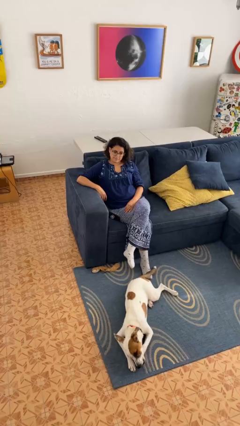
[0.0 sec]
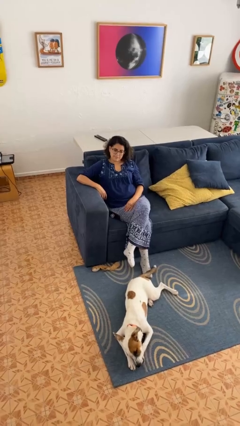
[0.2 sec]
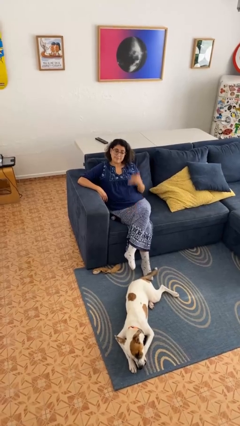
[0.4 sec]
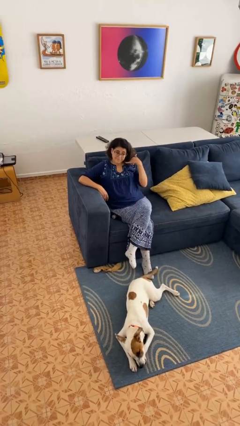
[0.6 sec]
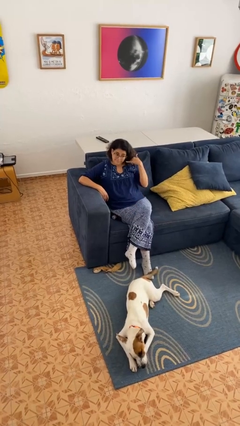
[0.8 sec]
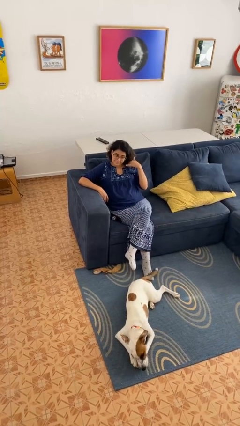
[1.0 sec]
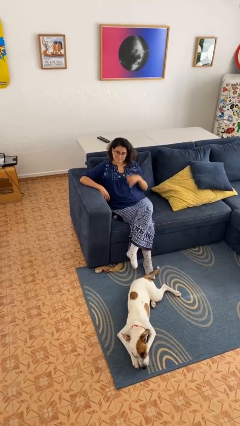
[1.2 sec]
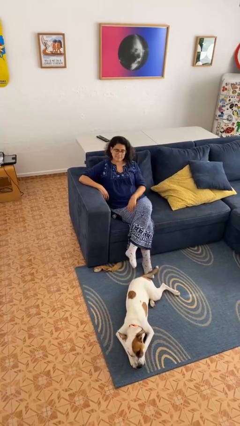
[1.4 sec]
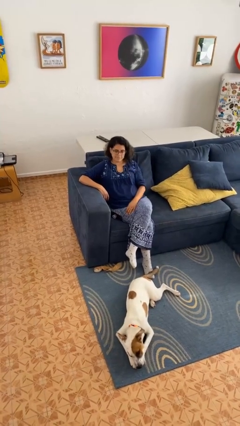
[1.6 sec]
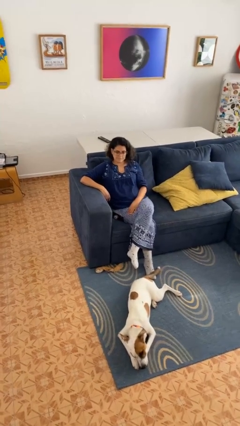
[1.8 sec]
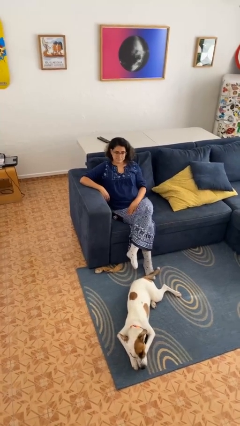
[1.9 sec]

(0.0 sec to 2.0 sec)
person gestures call me

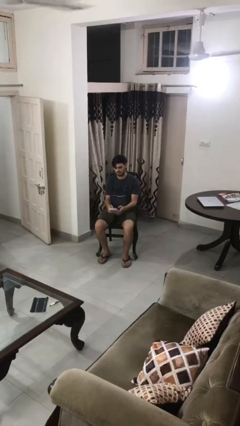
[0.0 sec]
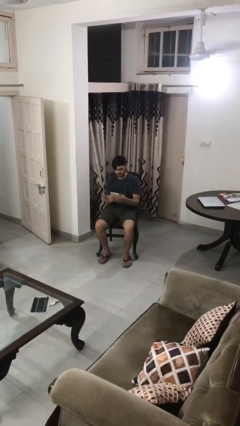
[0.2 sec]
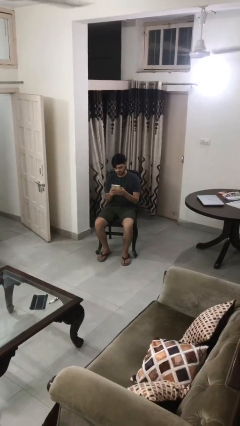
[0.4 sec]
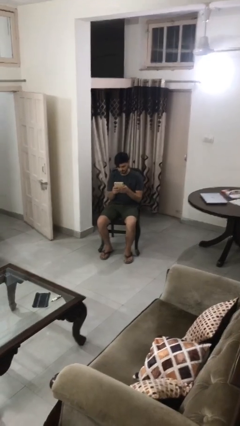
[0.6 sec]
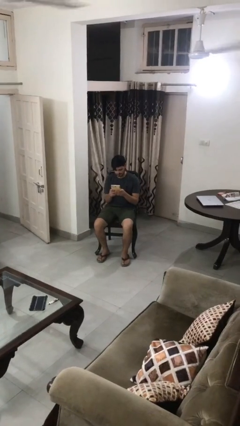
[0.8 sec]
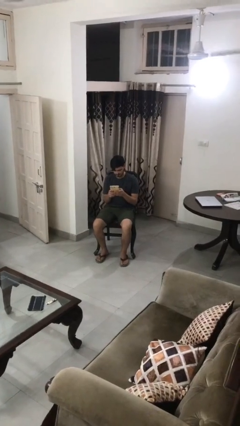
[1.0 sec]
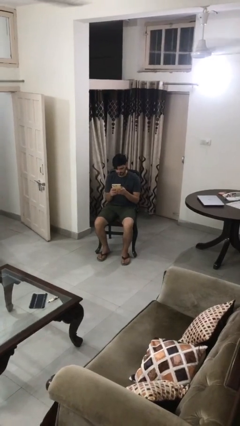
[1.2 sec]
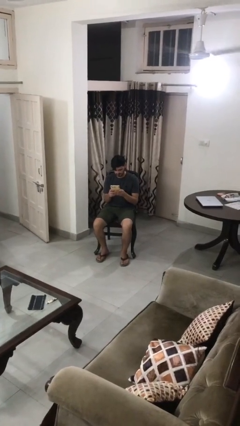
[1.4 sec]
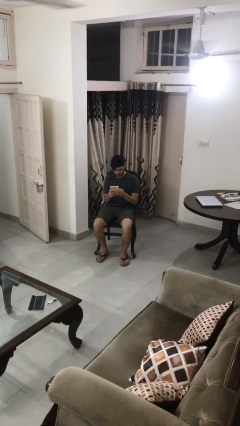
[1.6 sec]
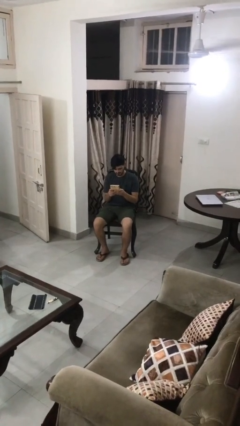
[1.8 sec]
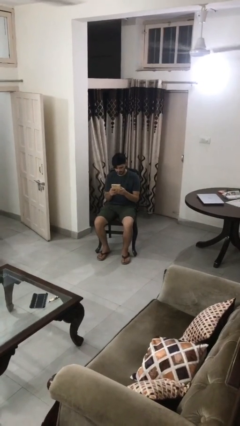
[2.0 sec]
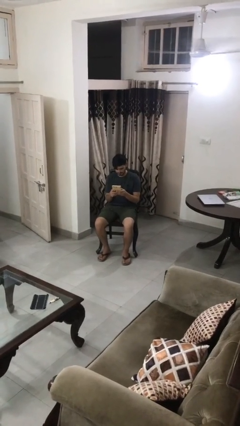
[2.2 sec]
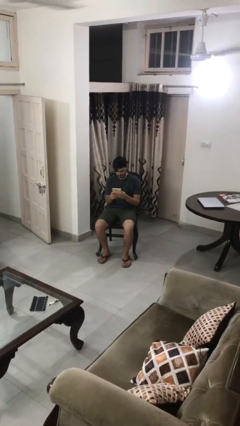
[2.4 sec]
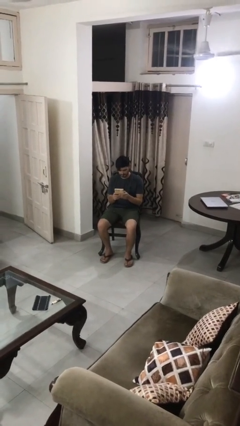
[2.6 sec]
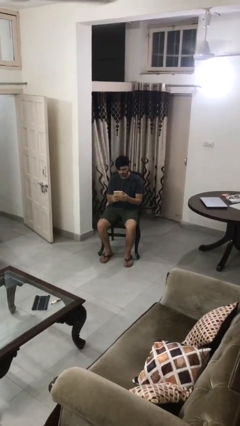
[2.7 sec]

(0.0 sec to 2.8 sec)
person interacts with tablet

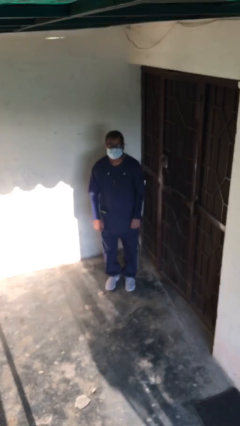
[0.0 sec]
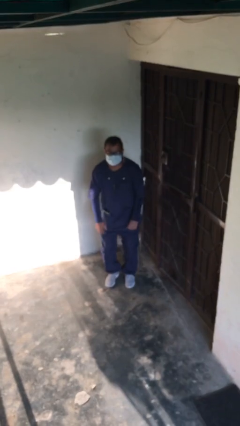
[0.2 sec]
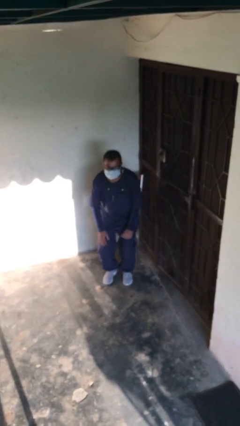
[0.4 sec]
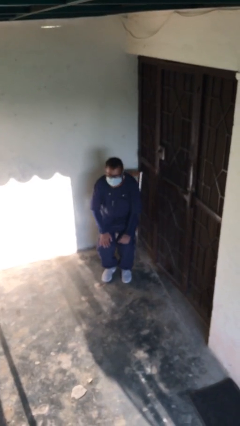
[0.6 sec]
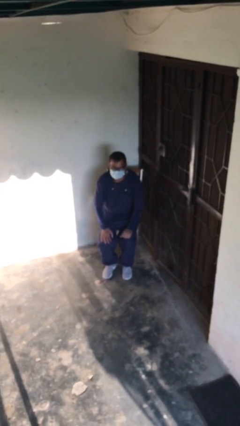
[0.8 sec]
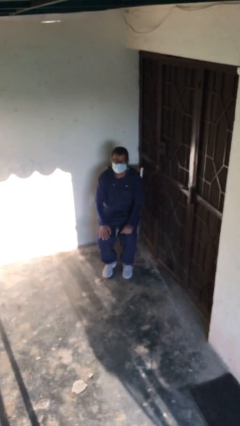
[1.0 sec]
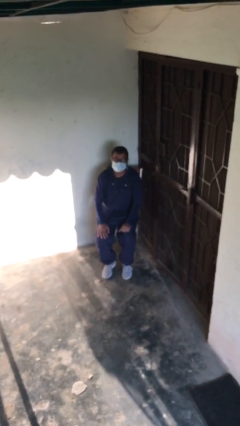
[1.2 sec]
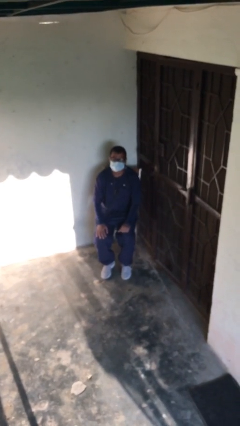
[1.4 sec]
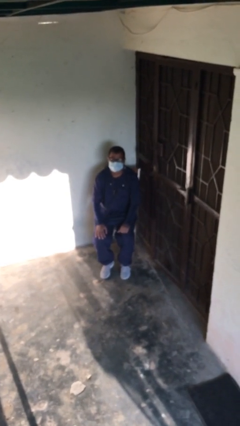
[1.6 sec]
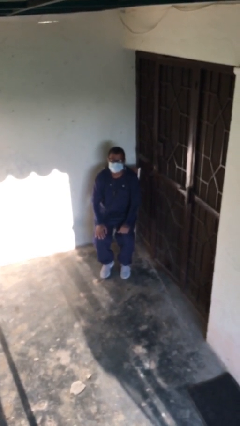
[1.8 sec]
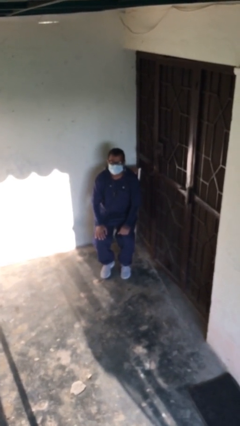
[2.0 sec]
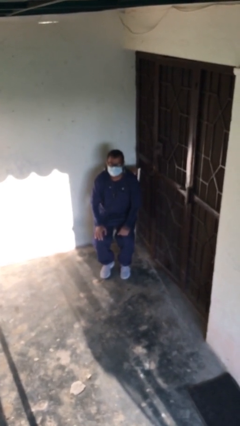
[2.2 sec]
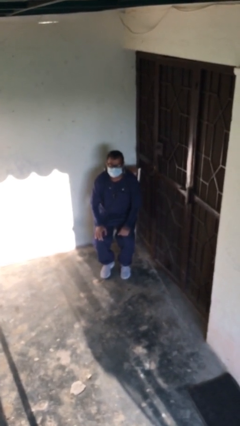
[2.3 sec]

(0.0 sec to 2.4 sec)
person sits down

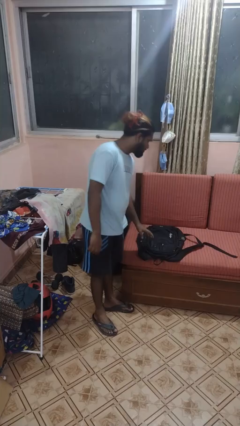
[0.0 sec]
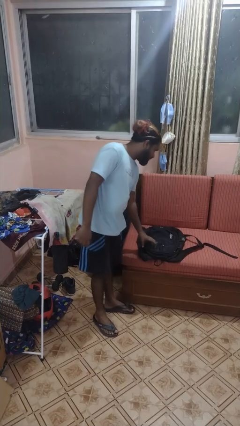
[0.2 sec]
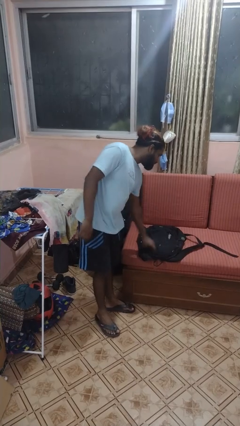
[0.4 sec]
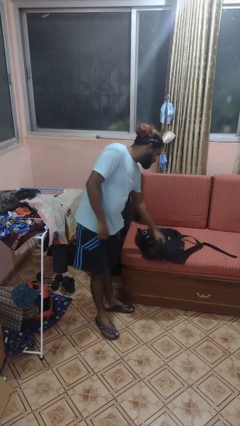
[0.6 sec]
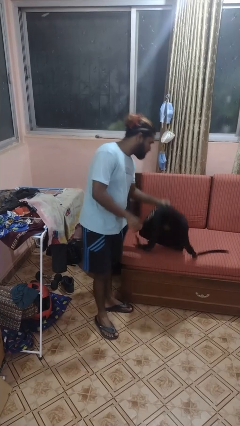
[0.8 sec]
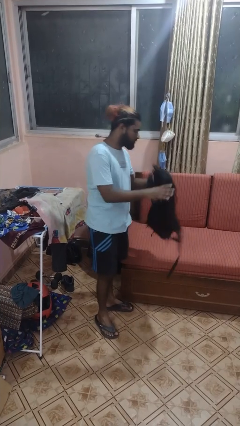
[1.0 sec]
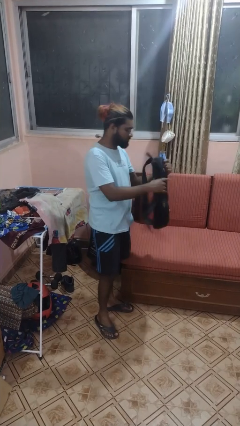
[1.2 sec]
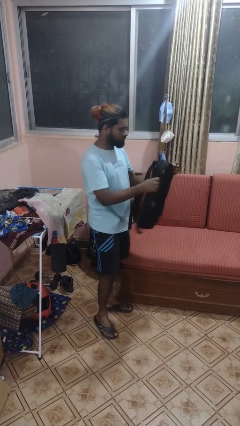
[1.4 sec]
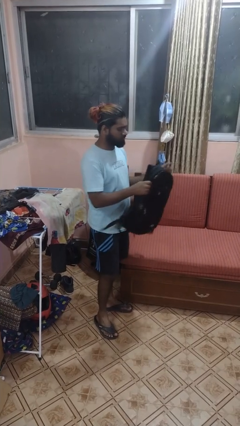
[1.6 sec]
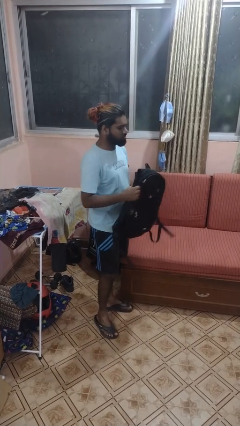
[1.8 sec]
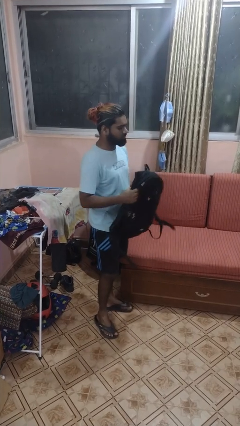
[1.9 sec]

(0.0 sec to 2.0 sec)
person picks up object from couch

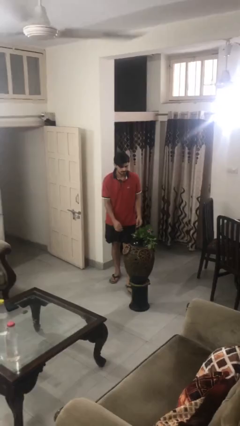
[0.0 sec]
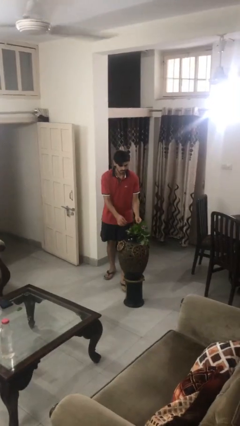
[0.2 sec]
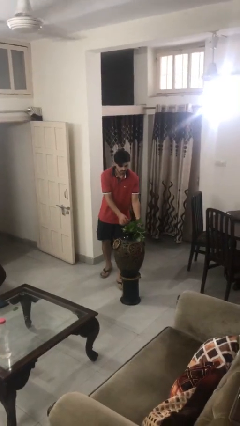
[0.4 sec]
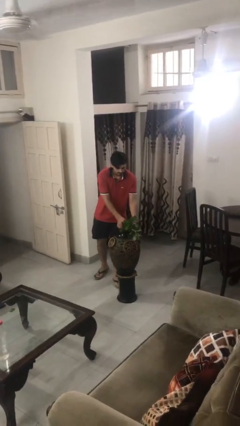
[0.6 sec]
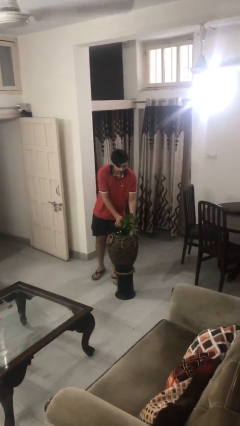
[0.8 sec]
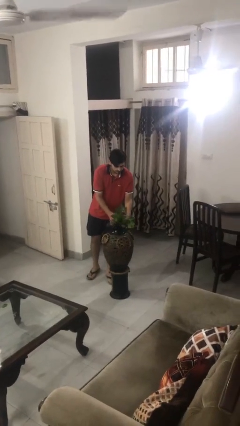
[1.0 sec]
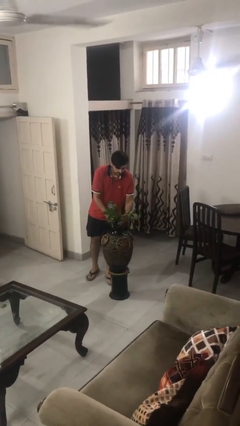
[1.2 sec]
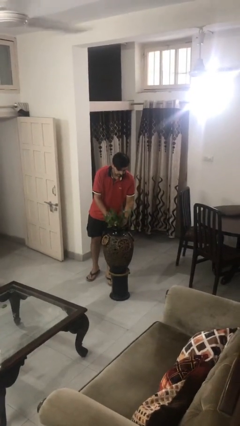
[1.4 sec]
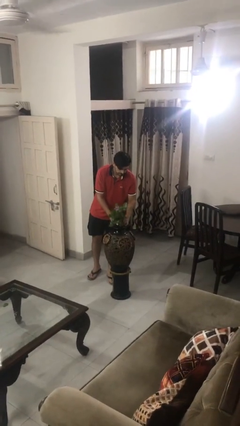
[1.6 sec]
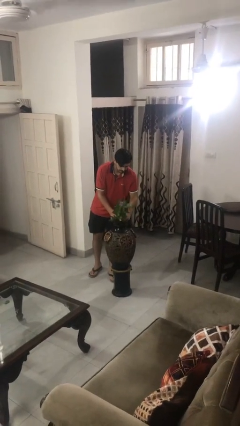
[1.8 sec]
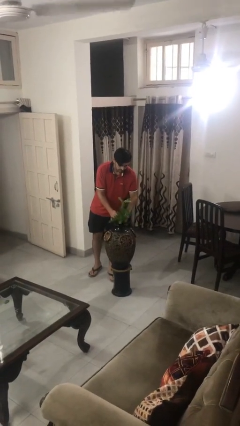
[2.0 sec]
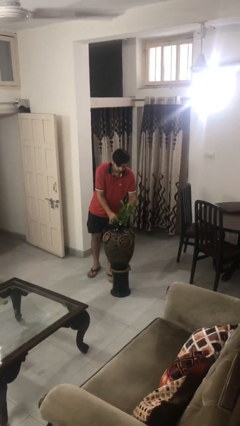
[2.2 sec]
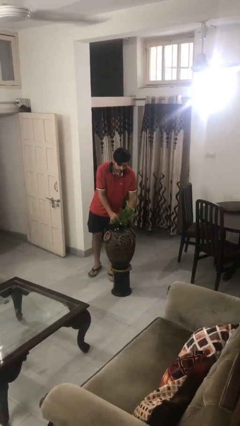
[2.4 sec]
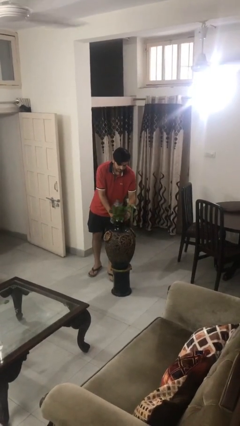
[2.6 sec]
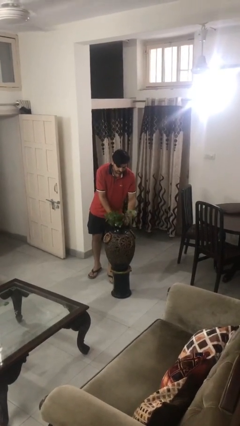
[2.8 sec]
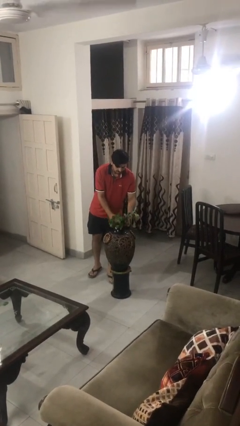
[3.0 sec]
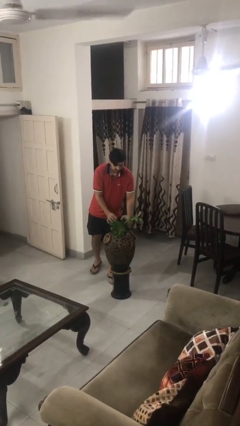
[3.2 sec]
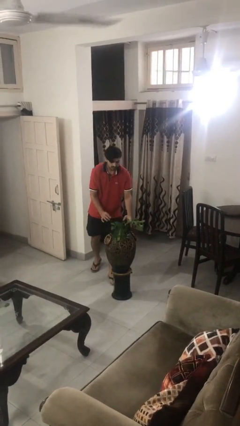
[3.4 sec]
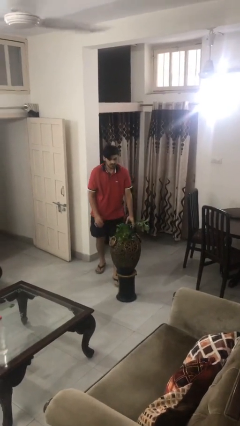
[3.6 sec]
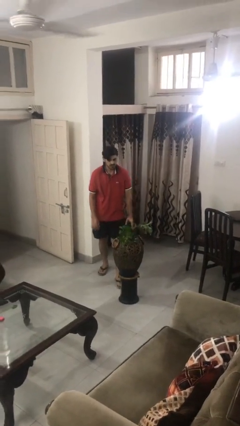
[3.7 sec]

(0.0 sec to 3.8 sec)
person arranges flowers in vase

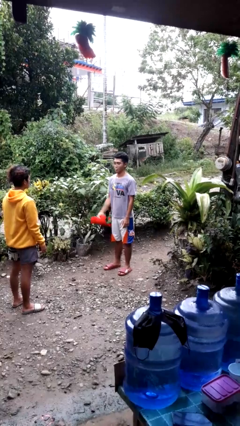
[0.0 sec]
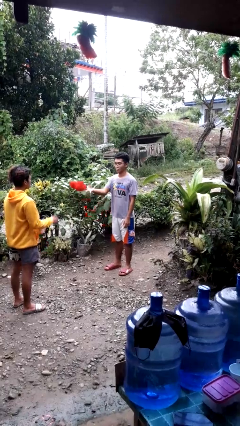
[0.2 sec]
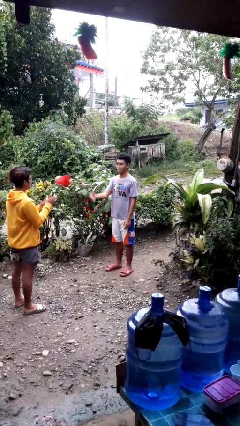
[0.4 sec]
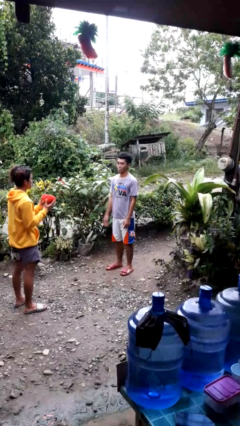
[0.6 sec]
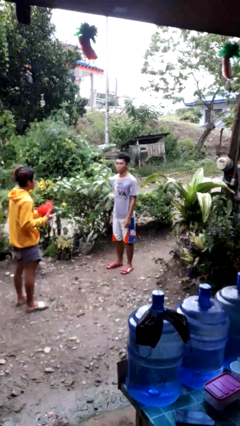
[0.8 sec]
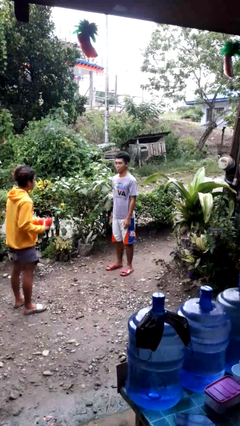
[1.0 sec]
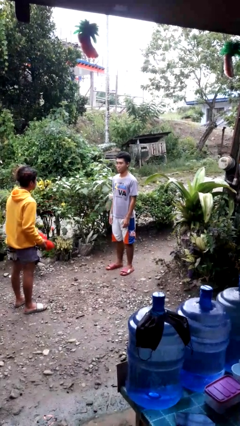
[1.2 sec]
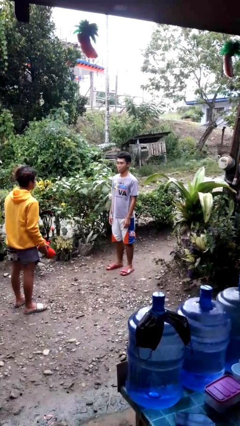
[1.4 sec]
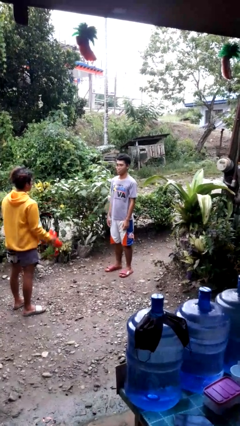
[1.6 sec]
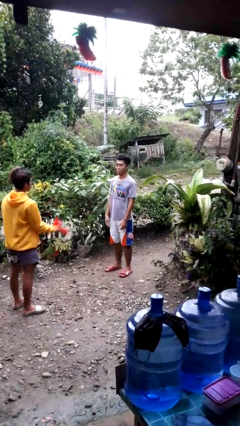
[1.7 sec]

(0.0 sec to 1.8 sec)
person throws object to person

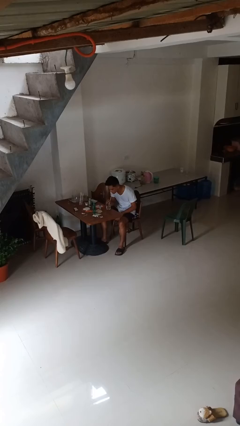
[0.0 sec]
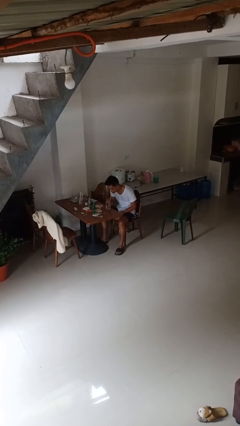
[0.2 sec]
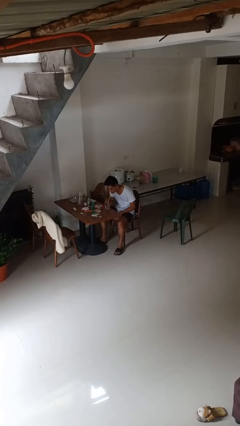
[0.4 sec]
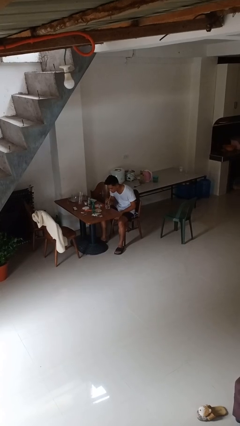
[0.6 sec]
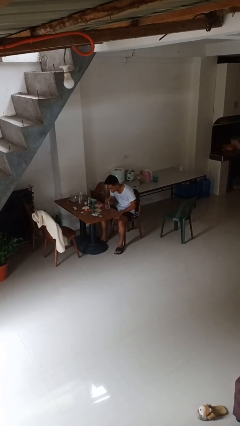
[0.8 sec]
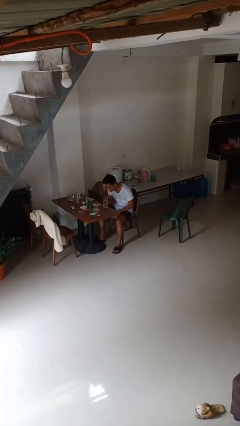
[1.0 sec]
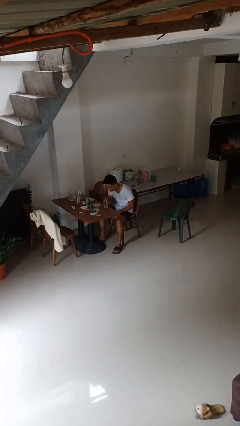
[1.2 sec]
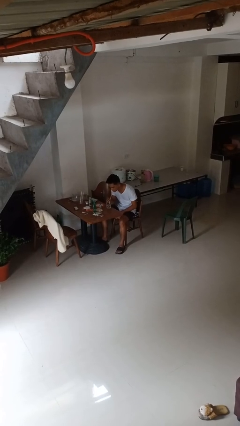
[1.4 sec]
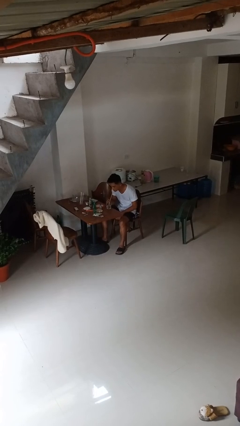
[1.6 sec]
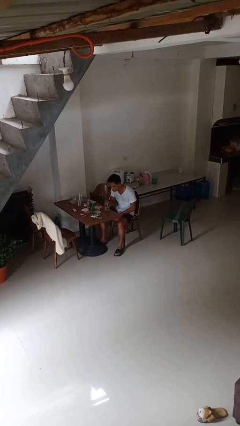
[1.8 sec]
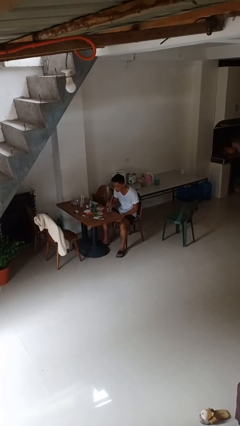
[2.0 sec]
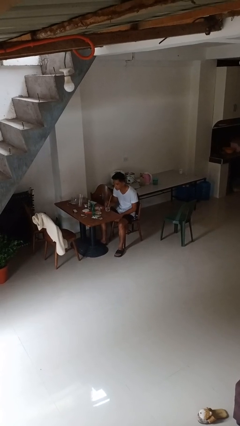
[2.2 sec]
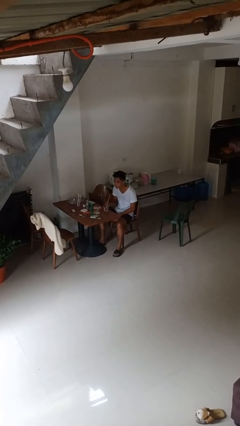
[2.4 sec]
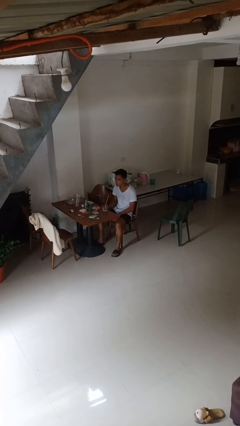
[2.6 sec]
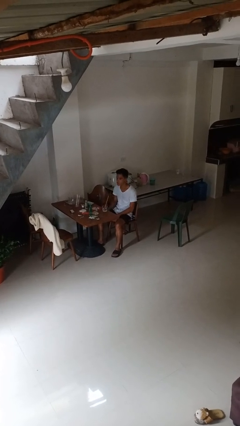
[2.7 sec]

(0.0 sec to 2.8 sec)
person drinks from straw
